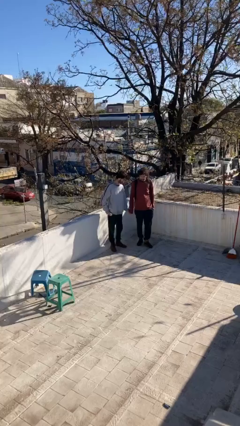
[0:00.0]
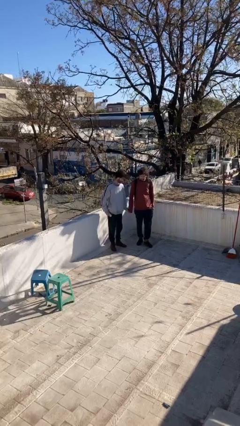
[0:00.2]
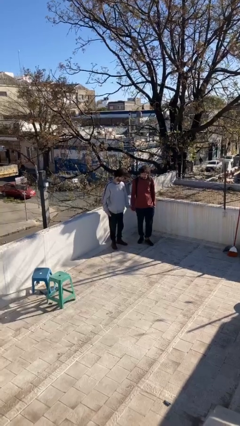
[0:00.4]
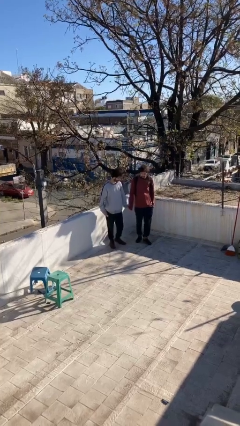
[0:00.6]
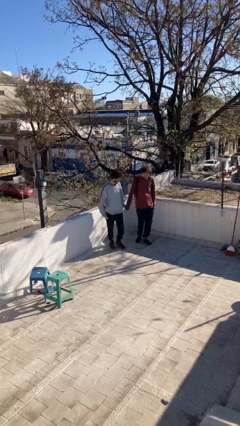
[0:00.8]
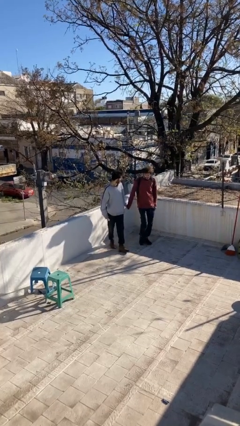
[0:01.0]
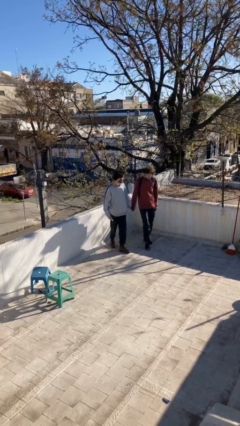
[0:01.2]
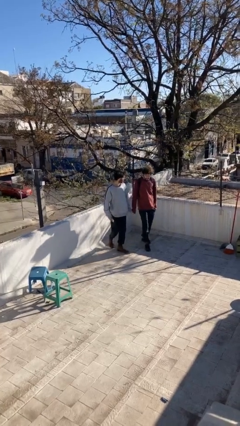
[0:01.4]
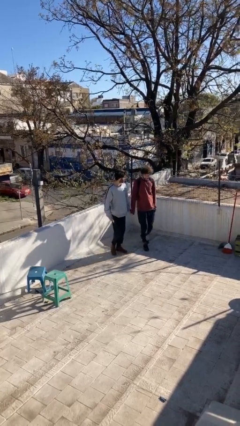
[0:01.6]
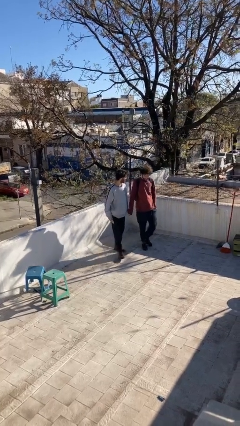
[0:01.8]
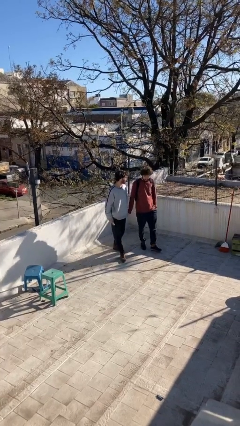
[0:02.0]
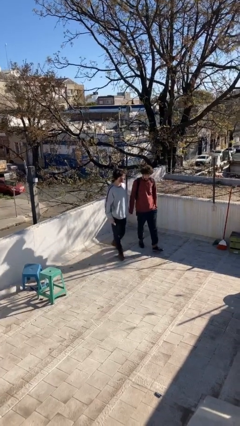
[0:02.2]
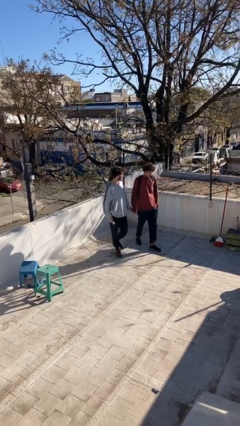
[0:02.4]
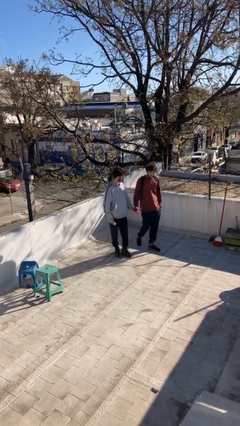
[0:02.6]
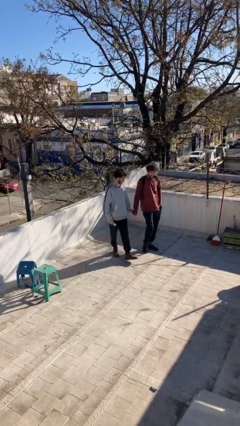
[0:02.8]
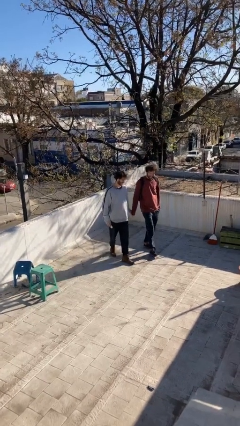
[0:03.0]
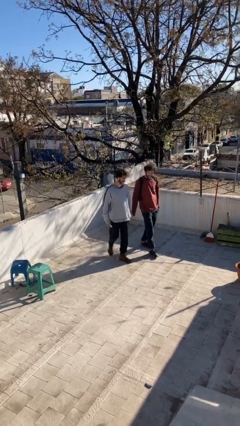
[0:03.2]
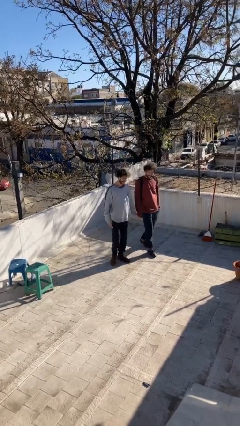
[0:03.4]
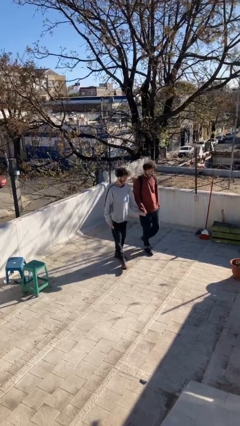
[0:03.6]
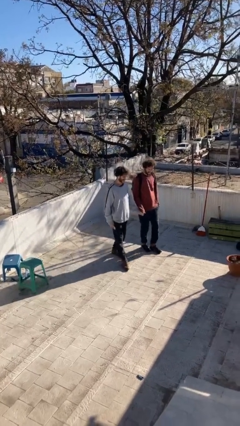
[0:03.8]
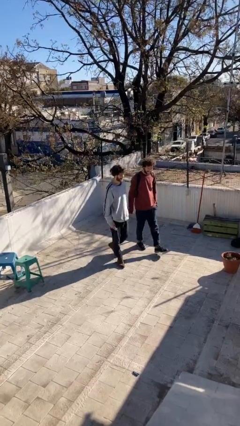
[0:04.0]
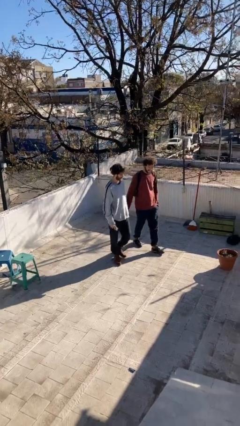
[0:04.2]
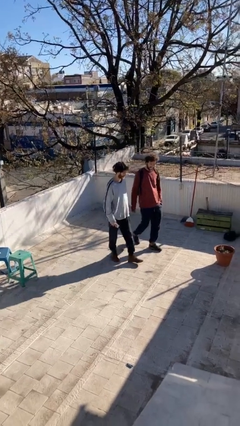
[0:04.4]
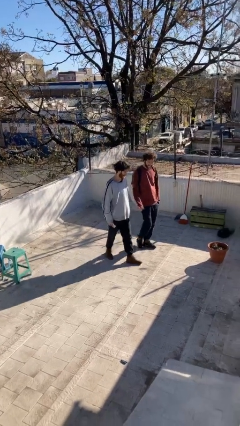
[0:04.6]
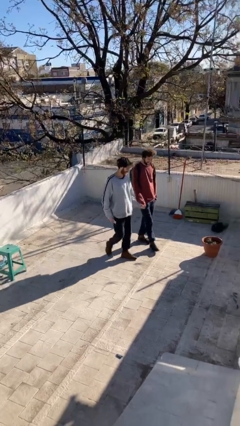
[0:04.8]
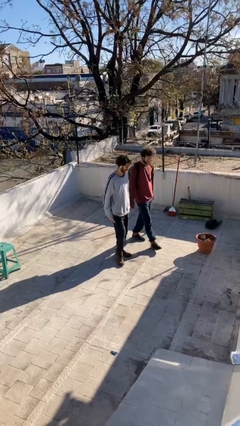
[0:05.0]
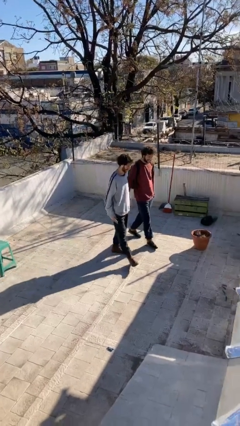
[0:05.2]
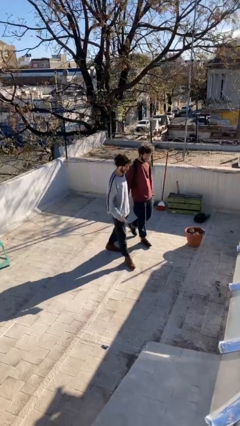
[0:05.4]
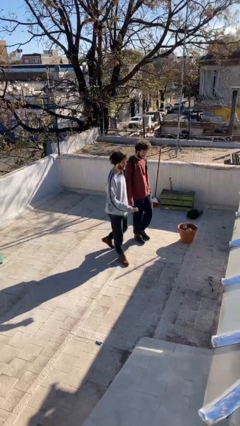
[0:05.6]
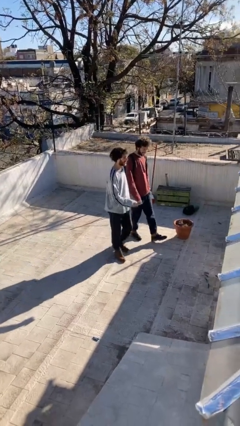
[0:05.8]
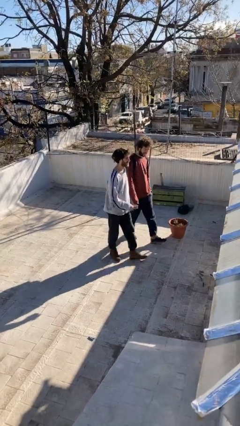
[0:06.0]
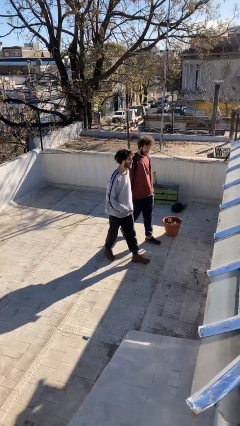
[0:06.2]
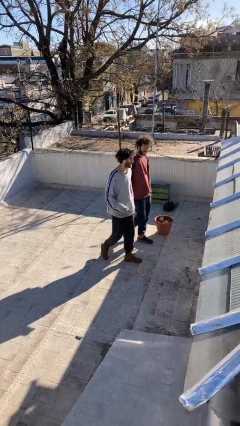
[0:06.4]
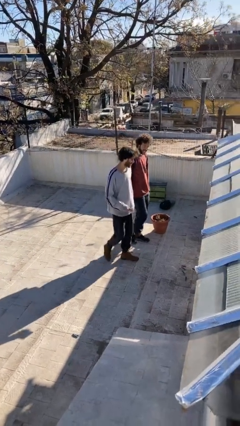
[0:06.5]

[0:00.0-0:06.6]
person holds hand

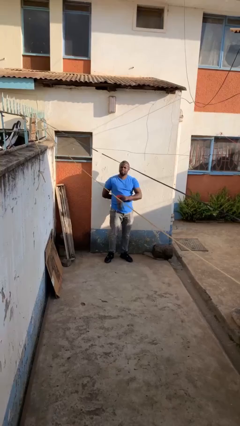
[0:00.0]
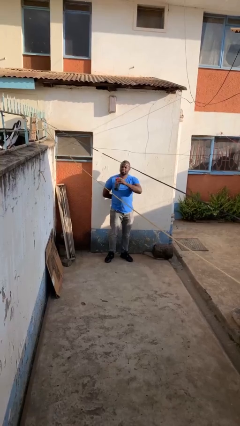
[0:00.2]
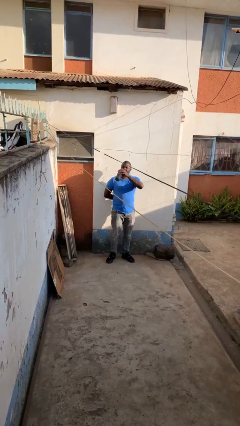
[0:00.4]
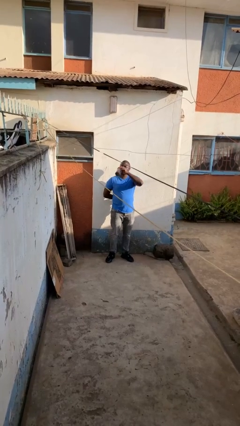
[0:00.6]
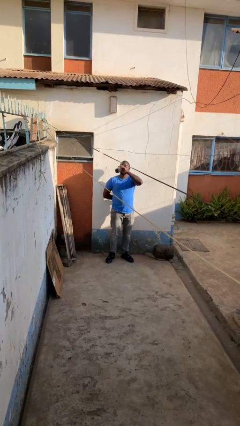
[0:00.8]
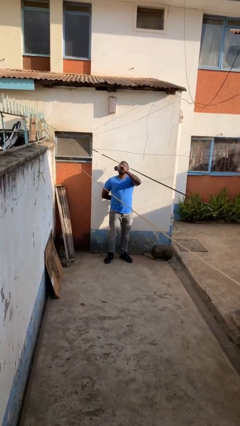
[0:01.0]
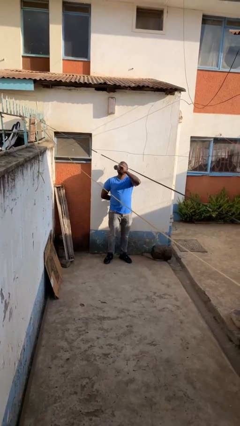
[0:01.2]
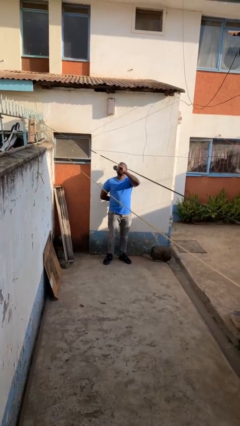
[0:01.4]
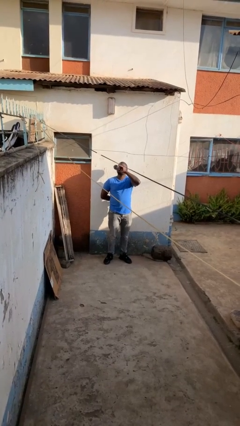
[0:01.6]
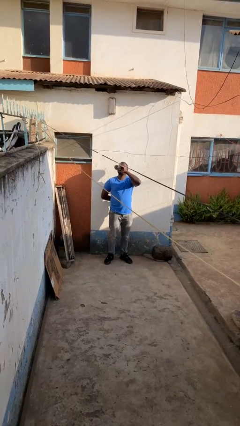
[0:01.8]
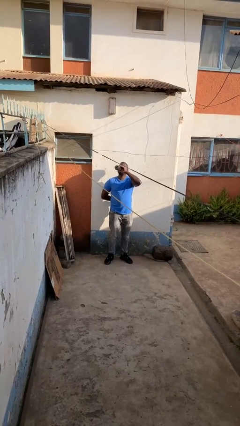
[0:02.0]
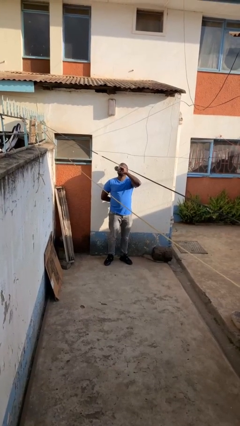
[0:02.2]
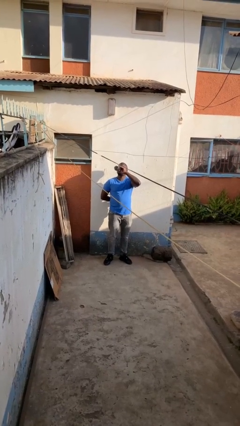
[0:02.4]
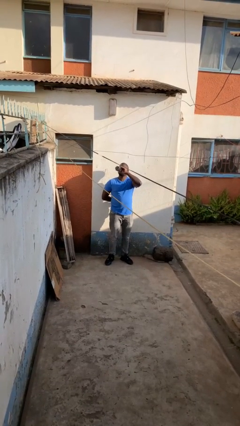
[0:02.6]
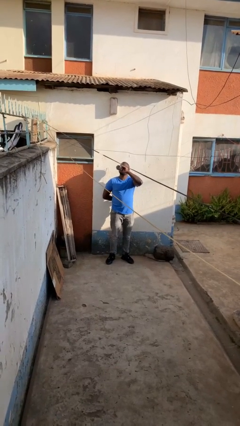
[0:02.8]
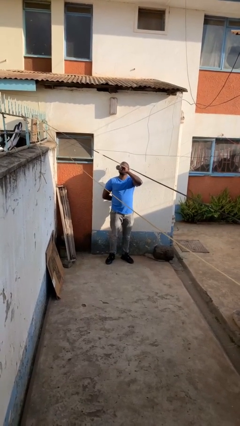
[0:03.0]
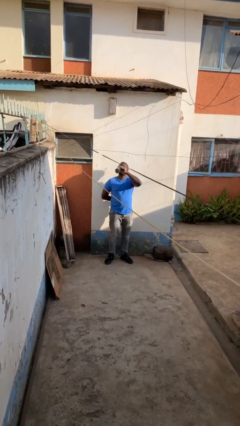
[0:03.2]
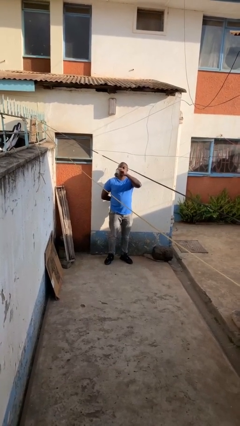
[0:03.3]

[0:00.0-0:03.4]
person drinks from bottle

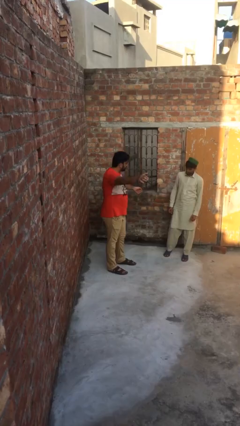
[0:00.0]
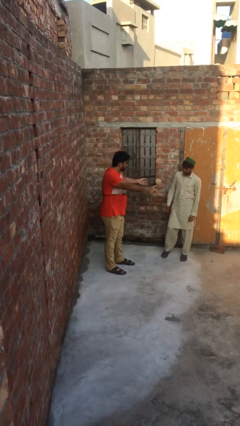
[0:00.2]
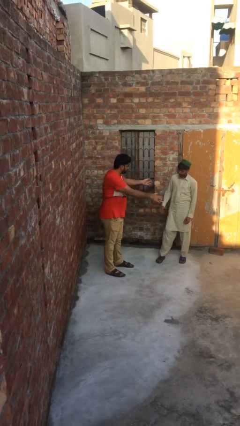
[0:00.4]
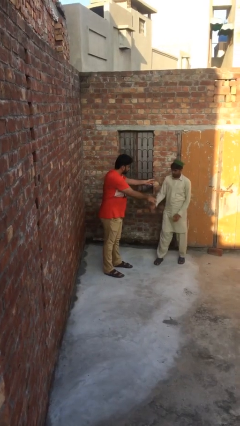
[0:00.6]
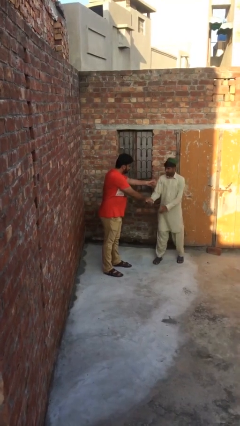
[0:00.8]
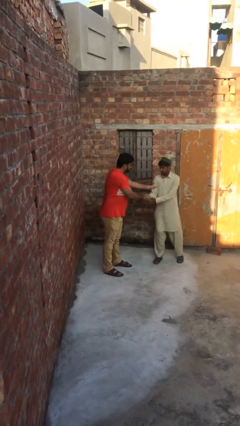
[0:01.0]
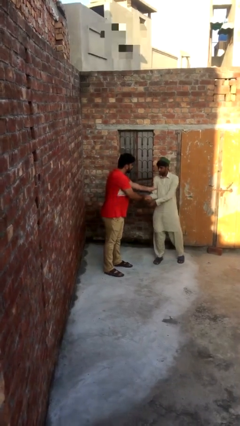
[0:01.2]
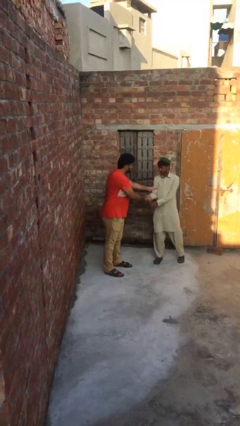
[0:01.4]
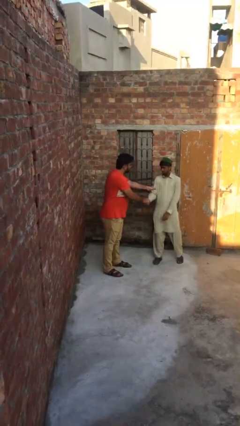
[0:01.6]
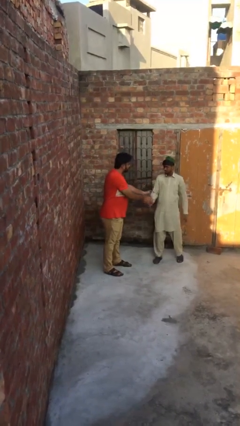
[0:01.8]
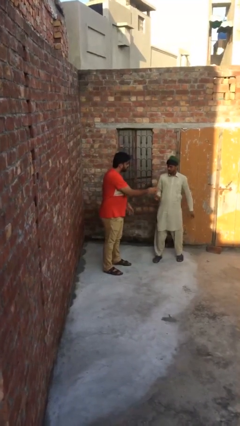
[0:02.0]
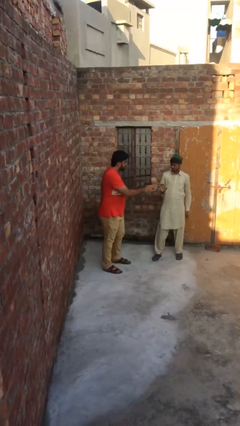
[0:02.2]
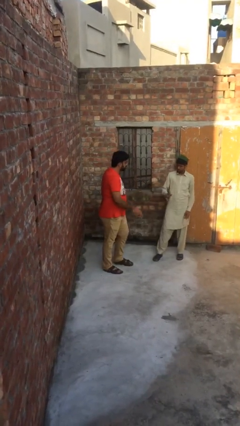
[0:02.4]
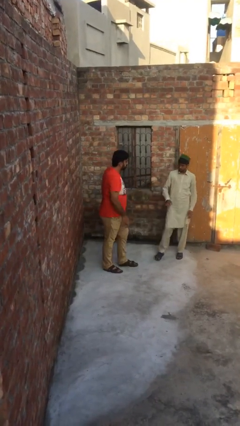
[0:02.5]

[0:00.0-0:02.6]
person shakes hand

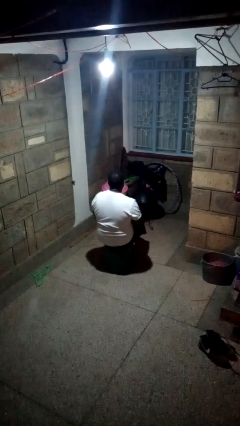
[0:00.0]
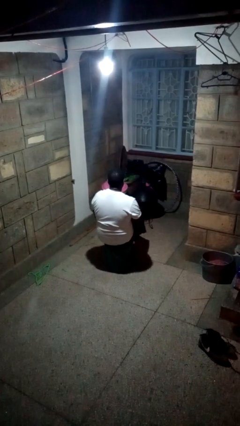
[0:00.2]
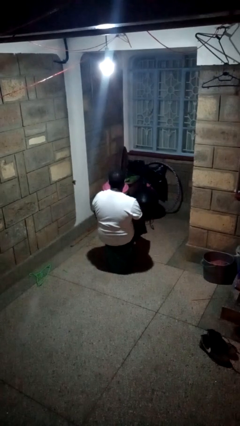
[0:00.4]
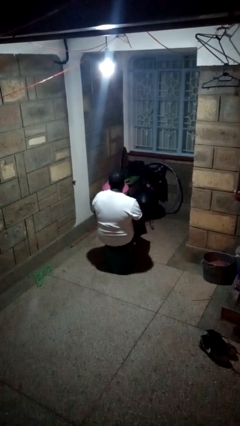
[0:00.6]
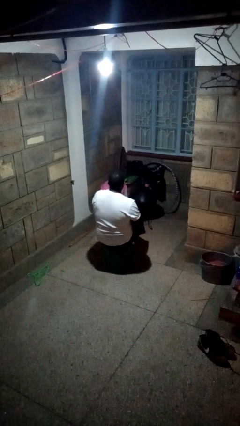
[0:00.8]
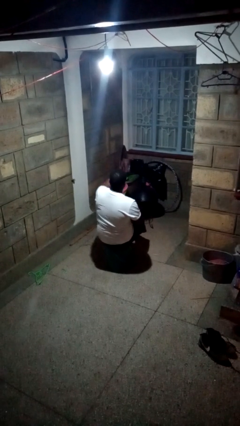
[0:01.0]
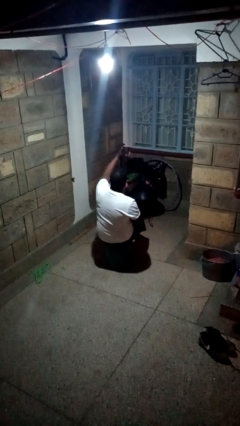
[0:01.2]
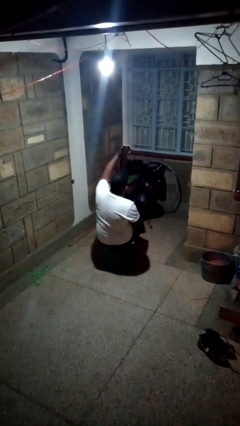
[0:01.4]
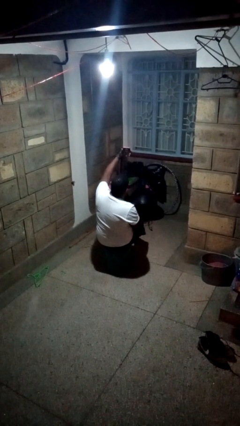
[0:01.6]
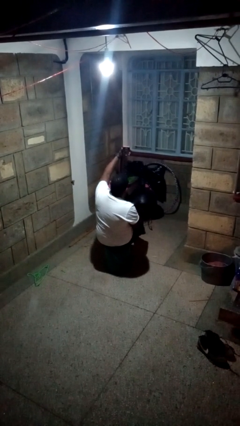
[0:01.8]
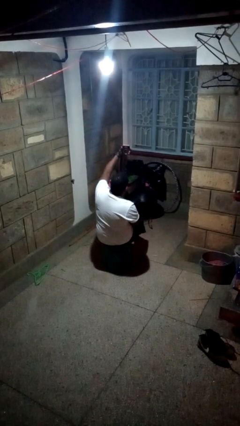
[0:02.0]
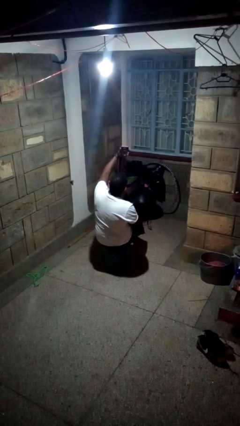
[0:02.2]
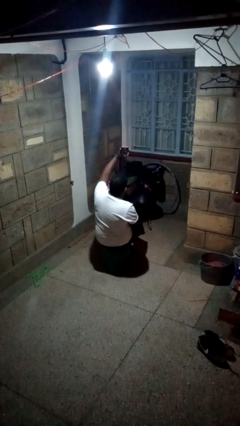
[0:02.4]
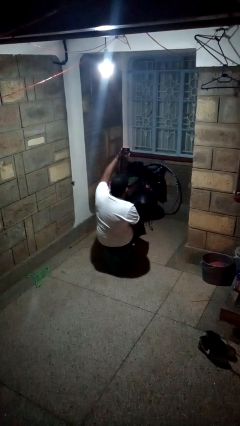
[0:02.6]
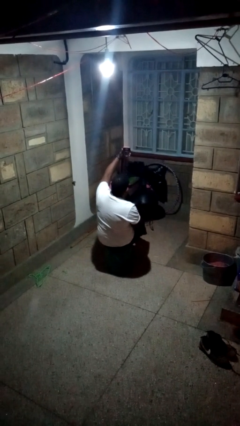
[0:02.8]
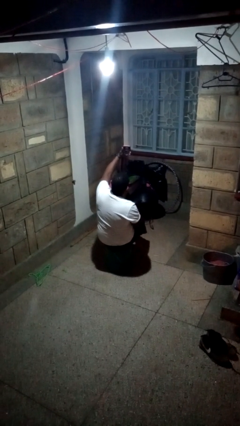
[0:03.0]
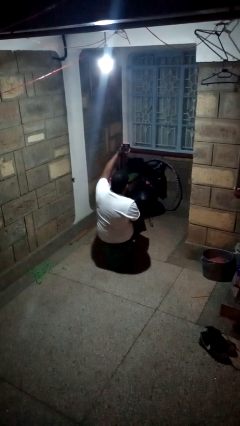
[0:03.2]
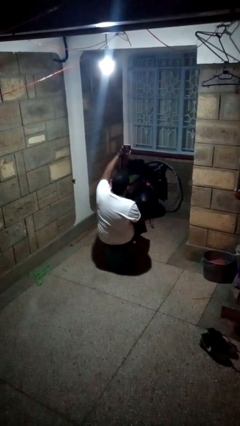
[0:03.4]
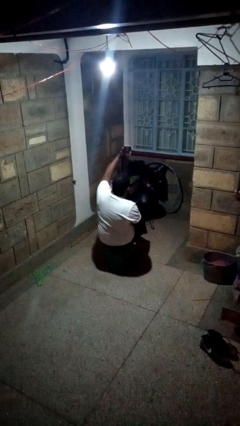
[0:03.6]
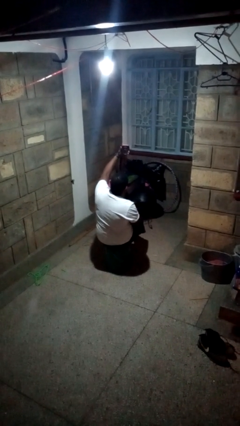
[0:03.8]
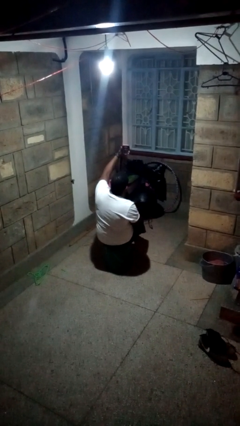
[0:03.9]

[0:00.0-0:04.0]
person takes selfie

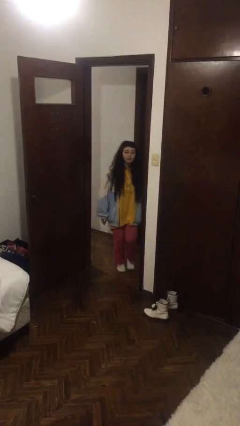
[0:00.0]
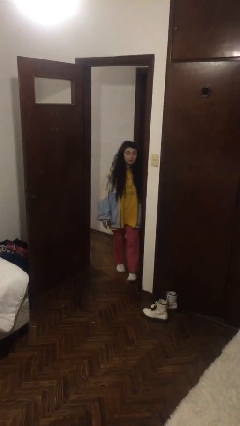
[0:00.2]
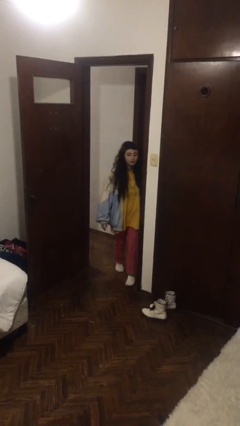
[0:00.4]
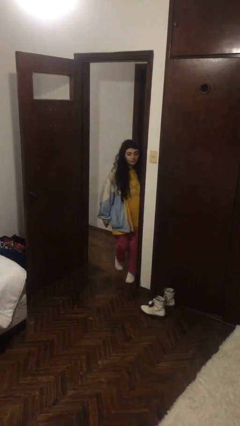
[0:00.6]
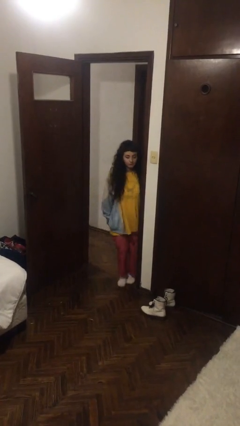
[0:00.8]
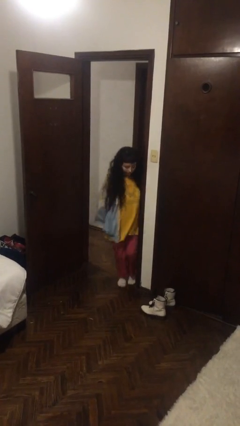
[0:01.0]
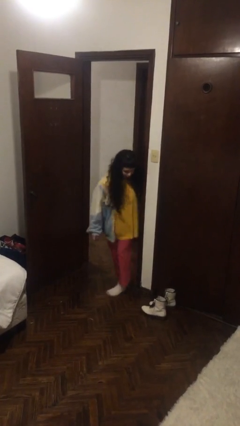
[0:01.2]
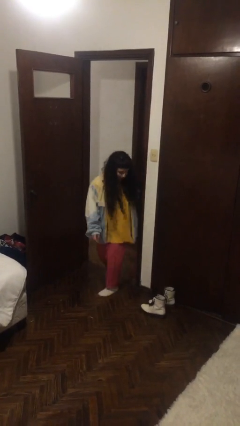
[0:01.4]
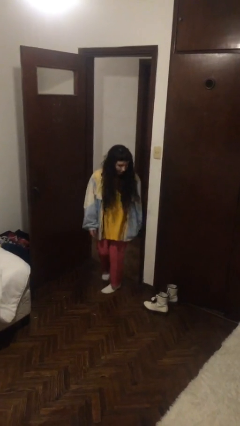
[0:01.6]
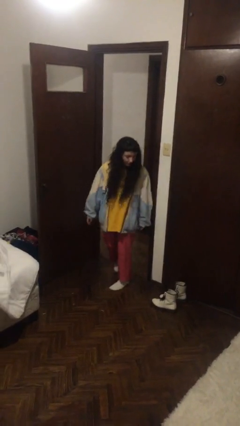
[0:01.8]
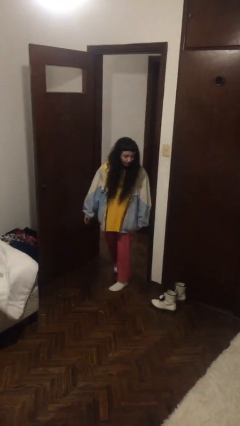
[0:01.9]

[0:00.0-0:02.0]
person bumps into wall
